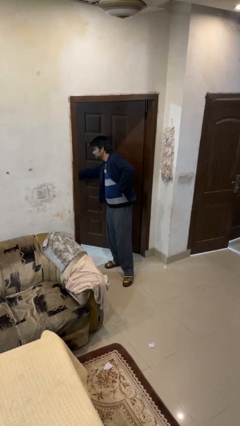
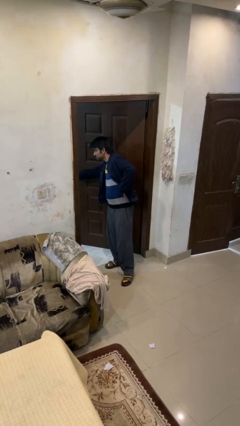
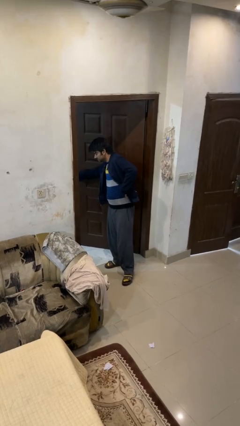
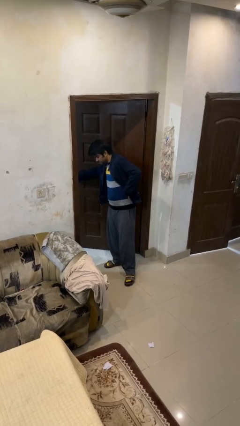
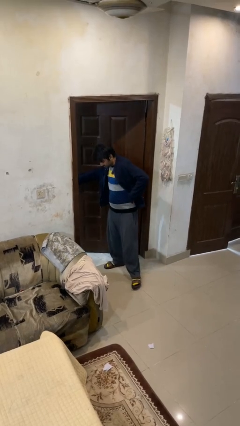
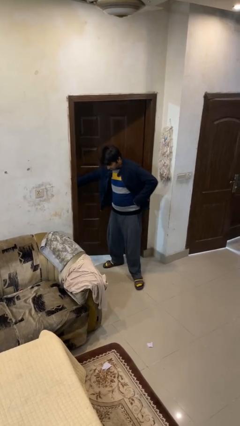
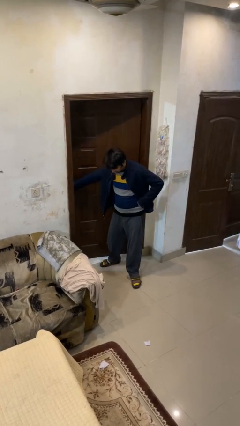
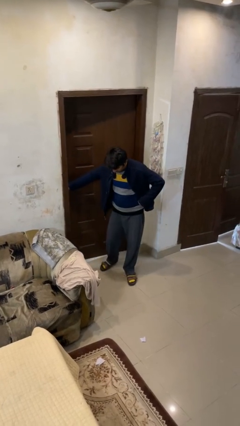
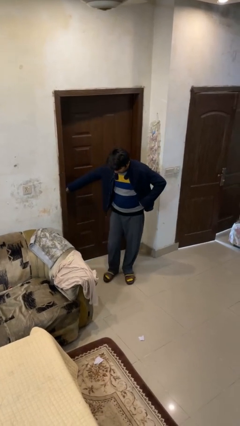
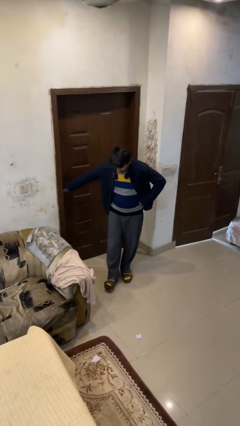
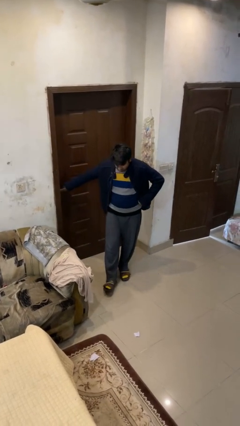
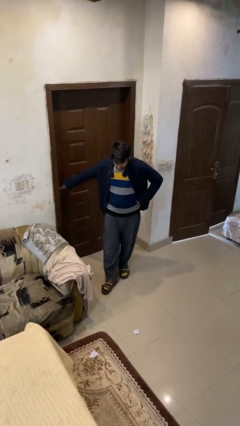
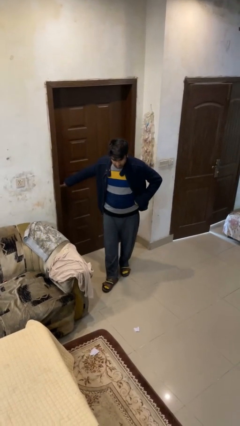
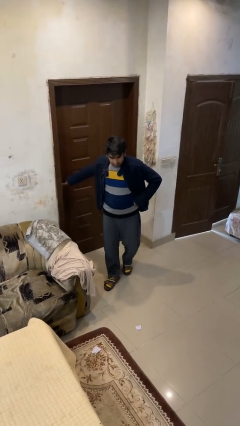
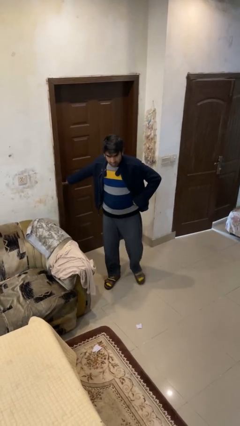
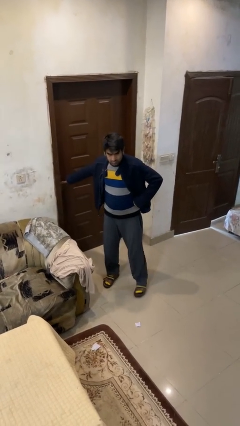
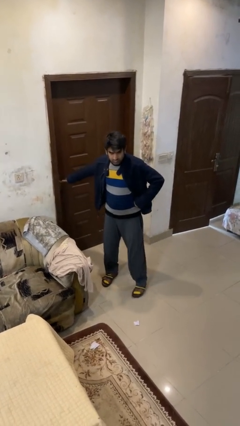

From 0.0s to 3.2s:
person closes facility door

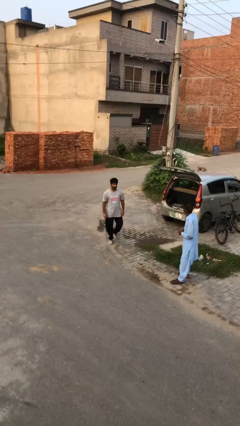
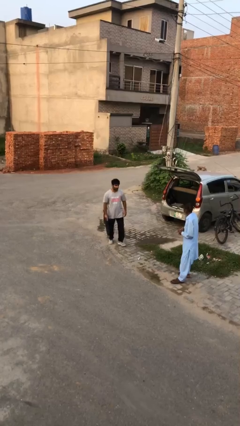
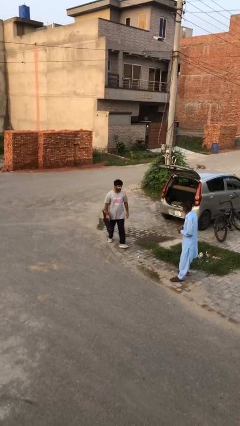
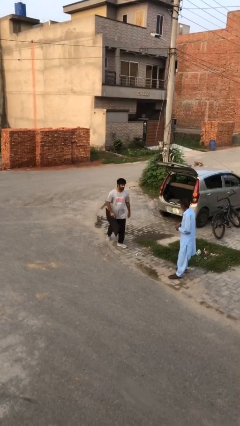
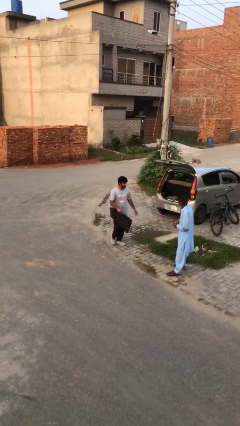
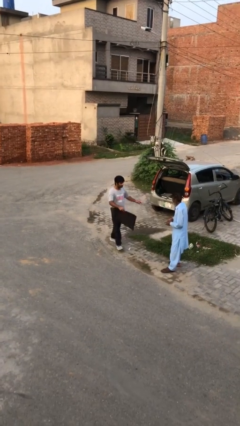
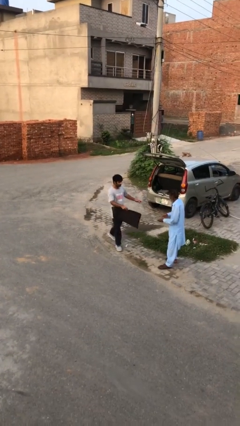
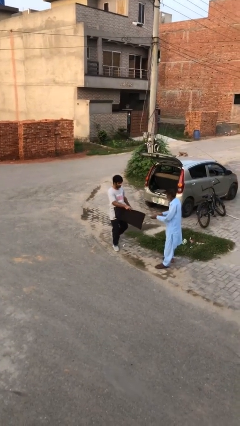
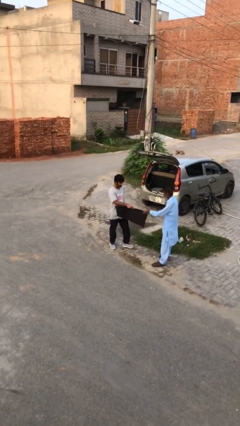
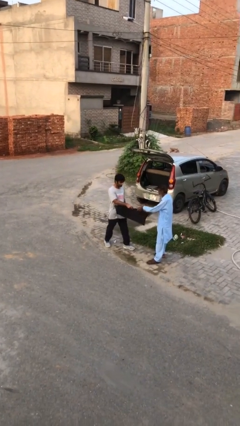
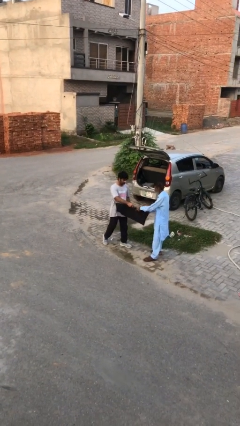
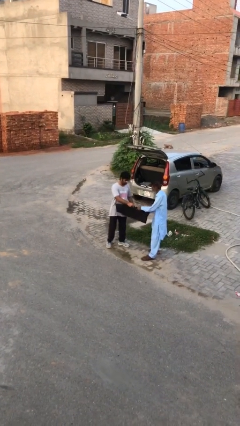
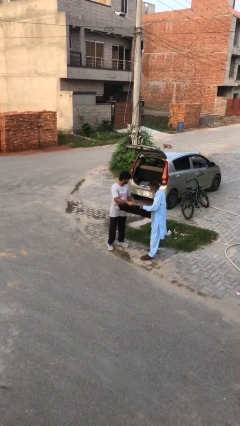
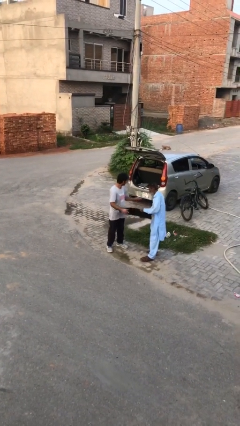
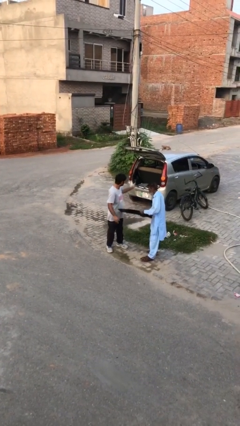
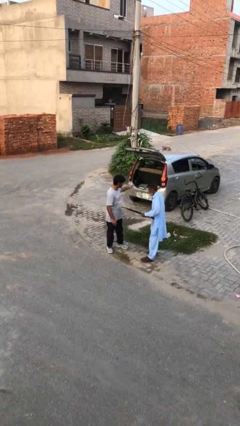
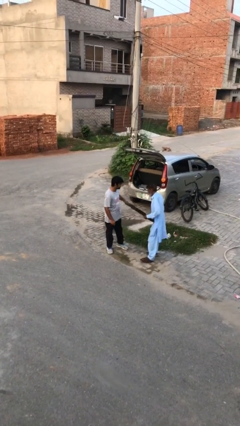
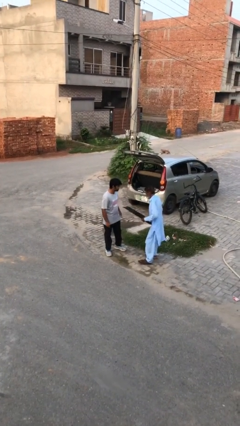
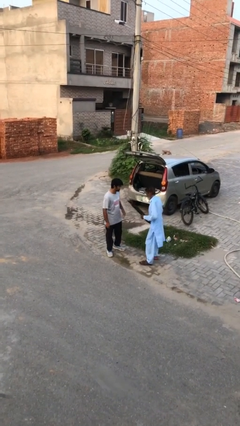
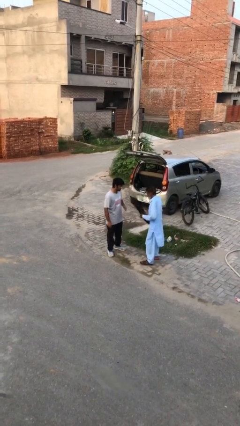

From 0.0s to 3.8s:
person transfers object to person

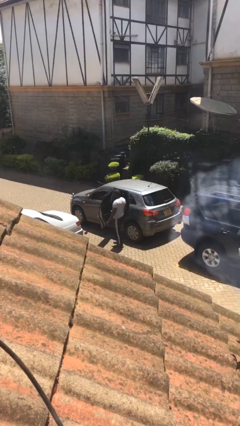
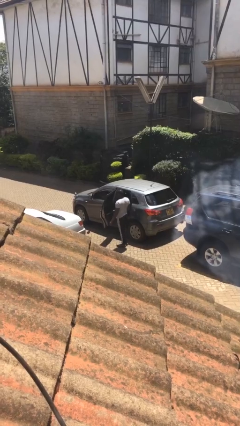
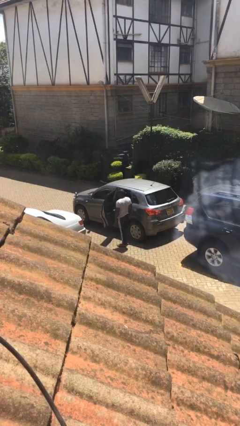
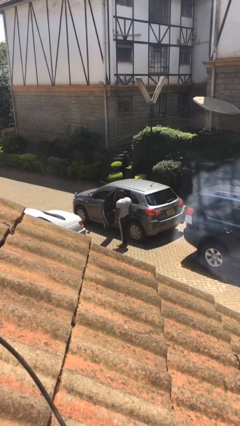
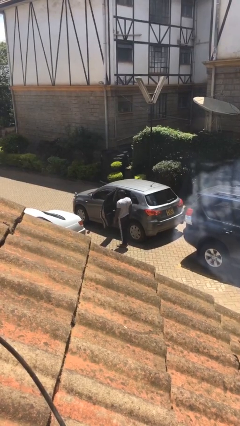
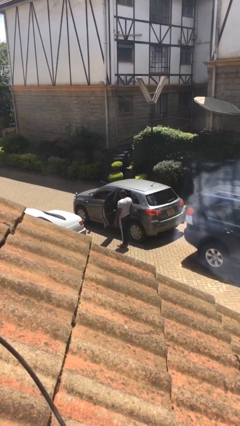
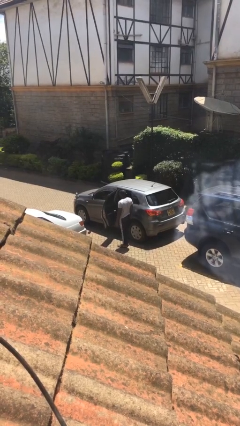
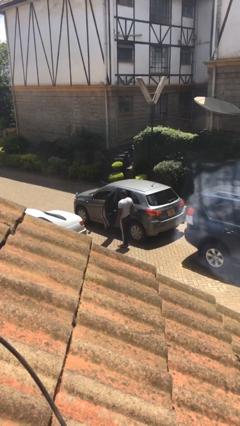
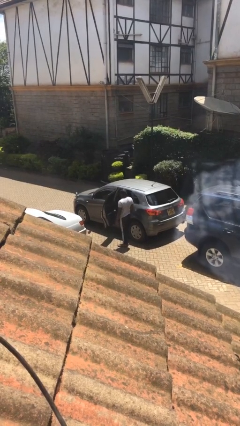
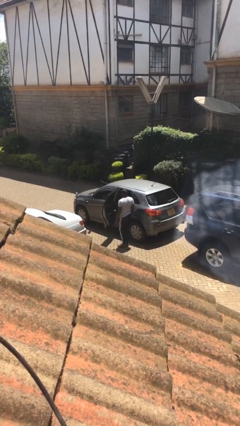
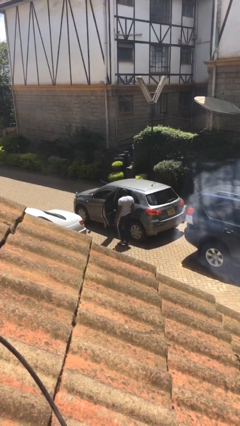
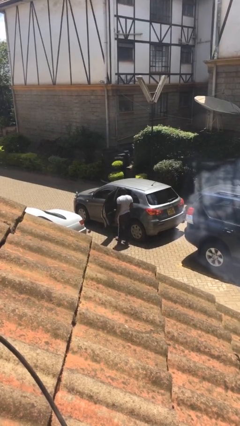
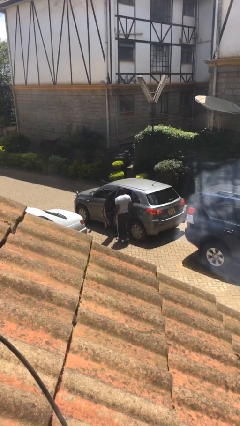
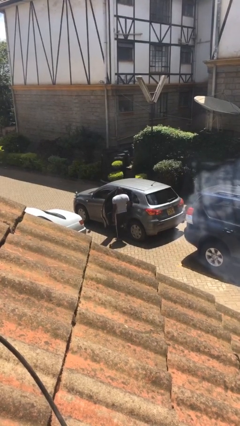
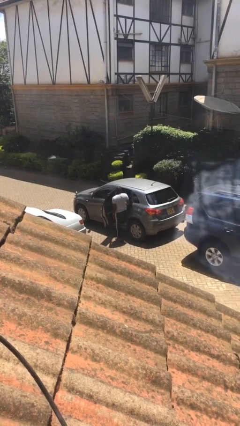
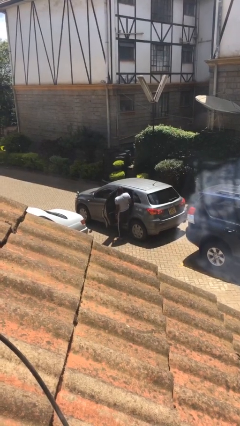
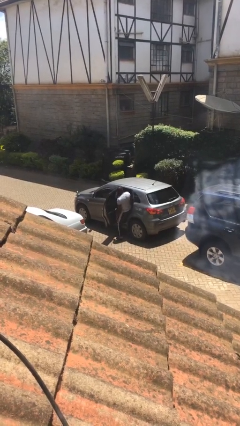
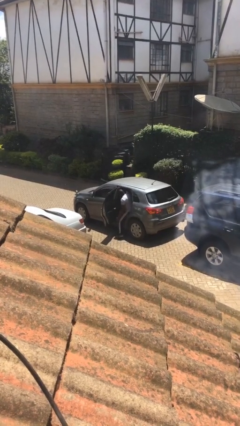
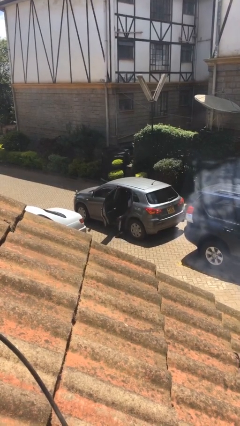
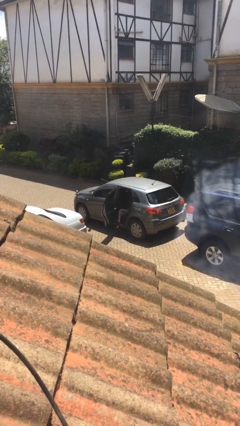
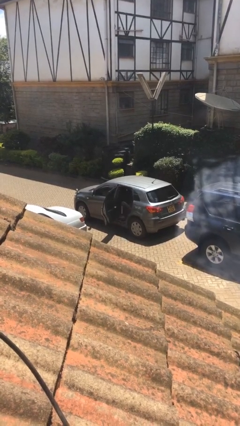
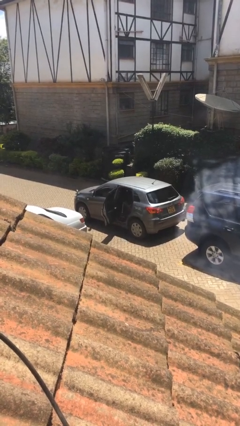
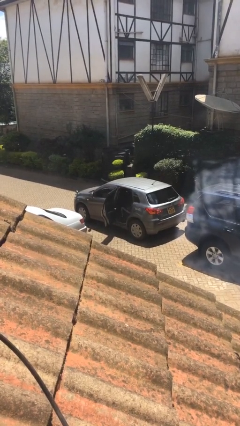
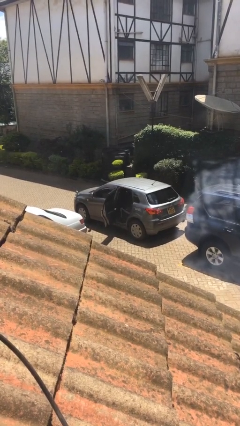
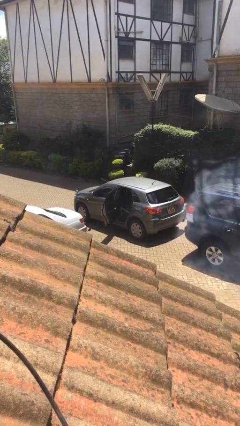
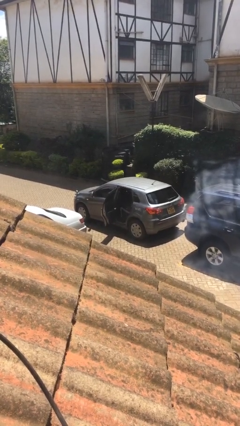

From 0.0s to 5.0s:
person enters car

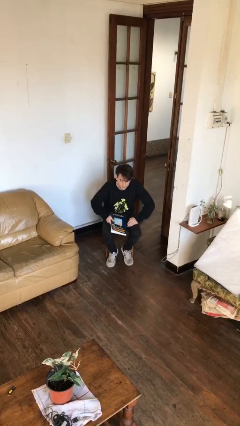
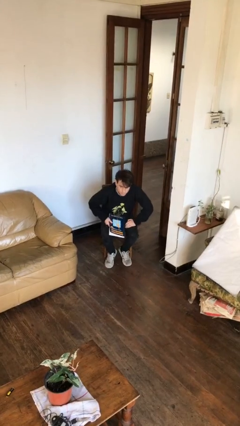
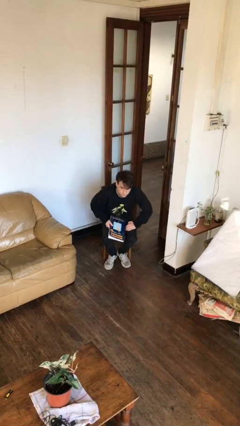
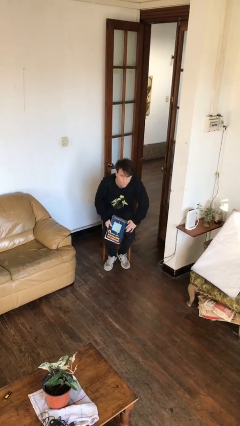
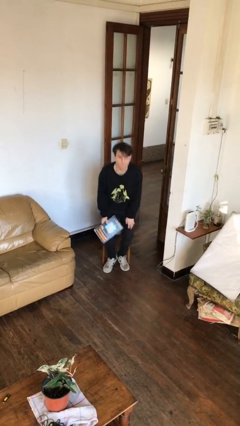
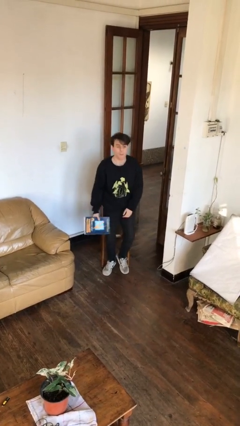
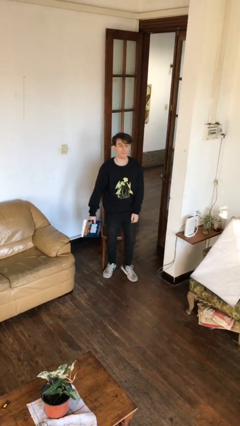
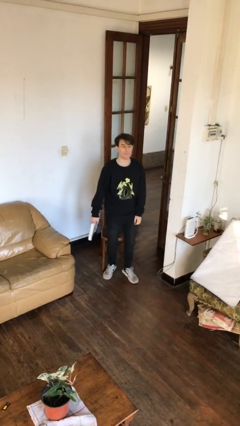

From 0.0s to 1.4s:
person stands up

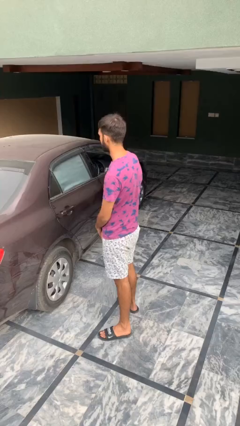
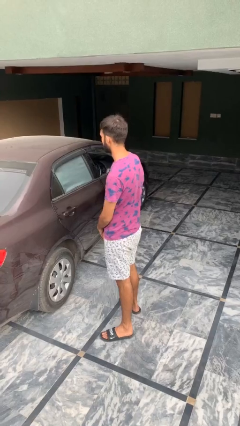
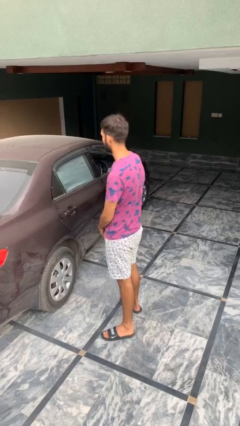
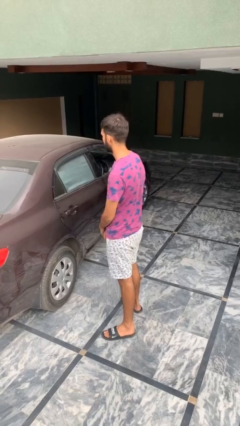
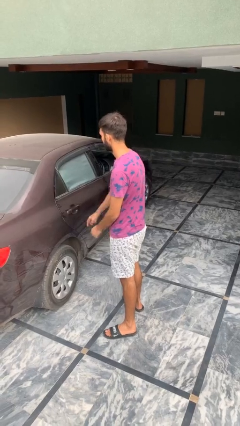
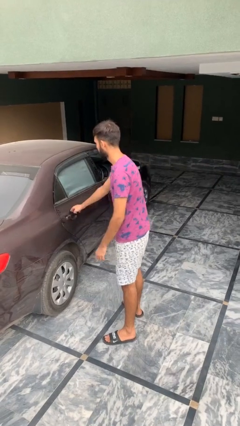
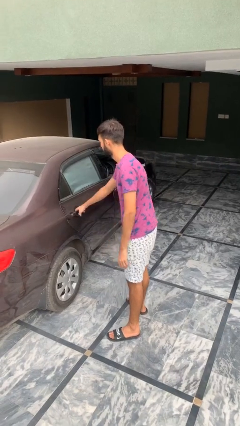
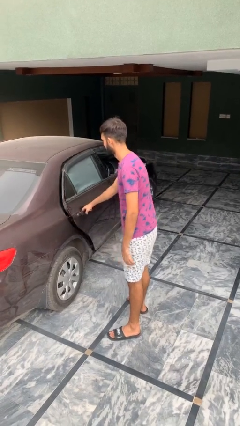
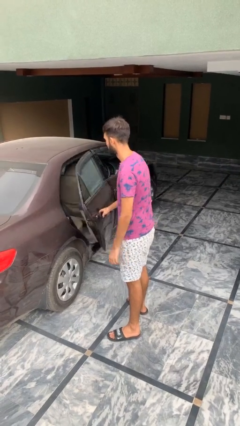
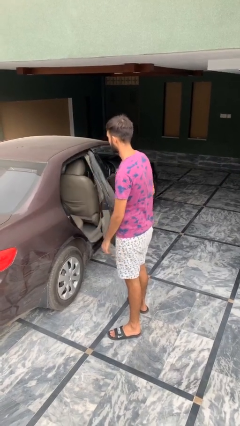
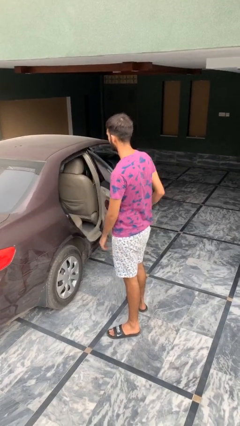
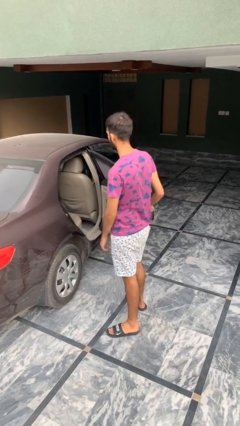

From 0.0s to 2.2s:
person opens car door

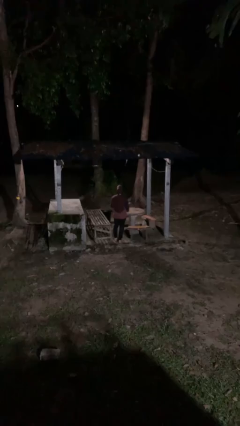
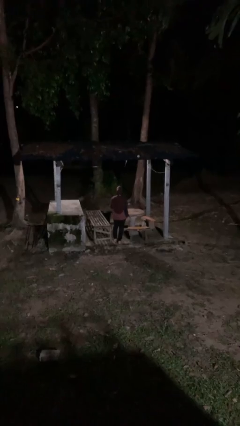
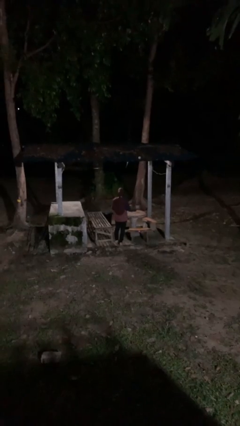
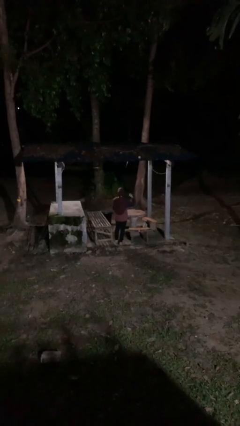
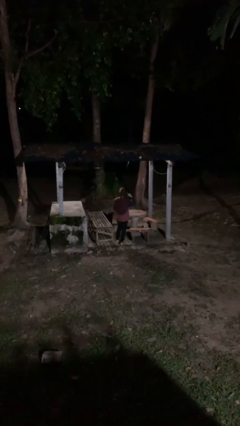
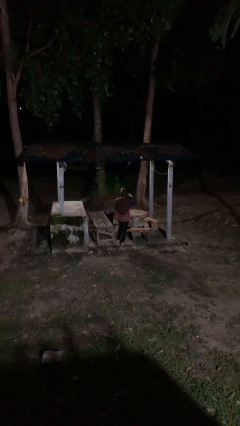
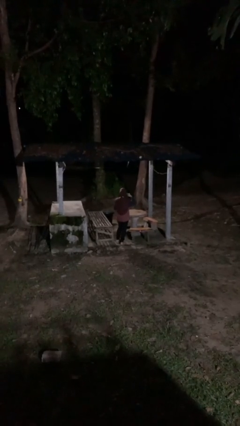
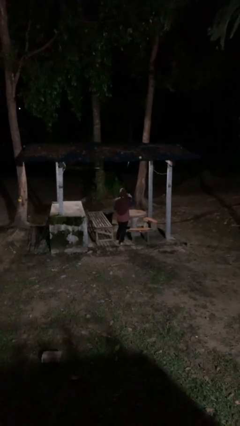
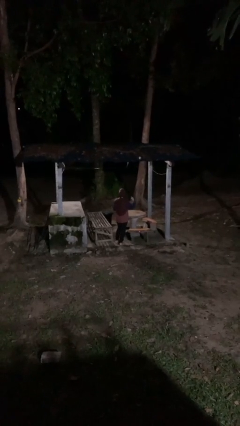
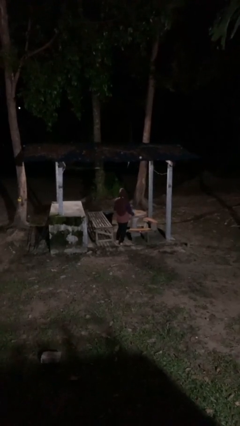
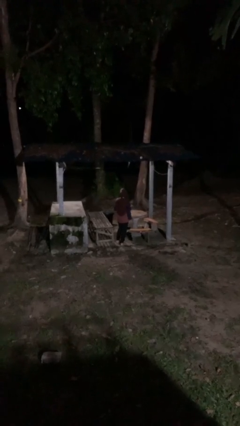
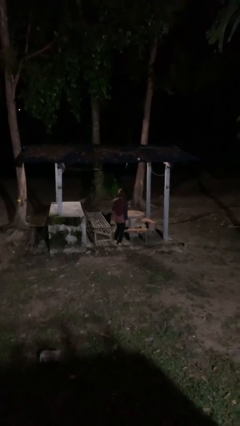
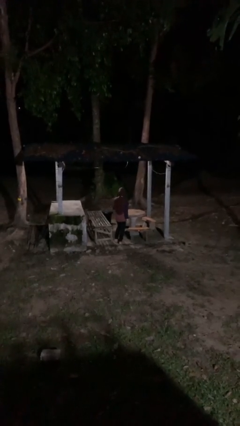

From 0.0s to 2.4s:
person gestures listen closely

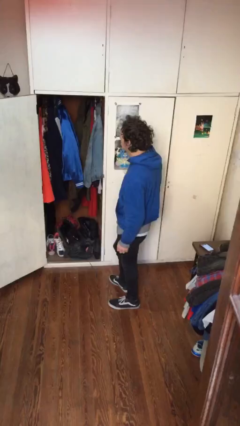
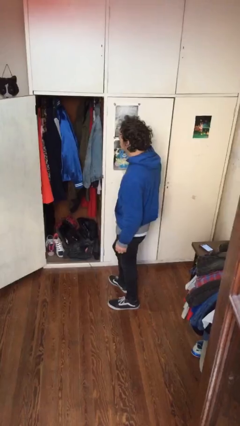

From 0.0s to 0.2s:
person takes clothes from closet
